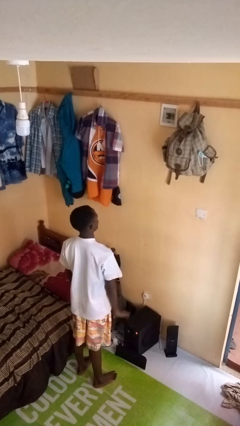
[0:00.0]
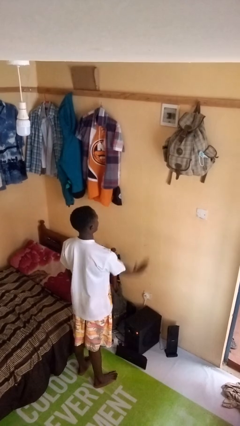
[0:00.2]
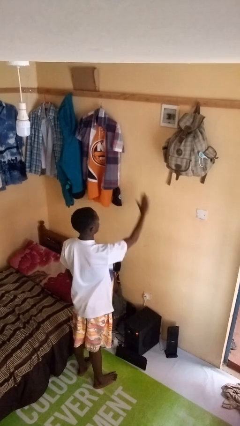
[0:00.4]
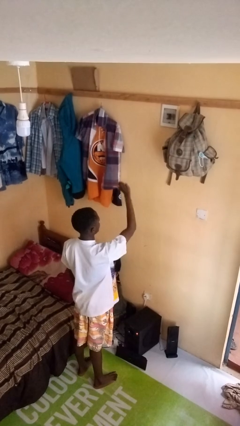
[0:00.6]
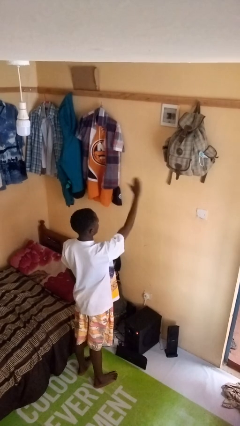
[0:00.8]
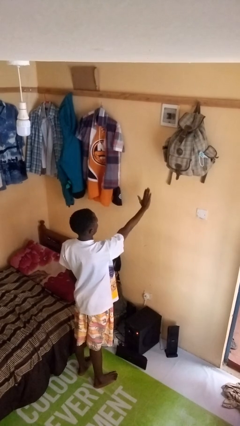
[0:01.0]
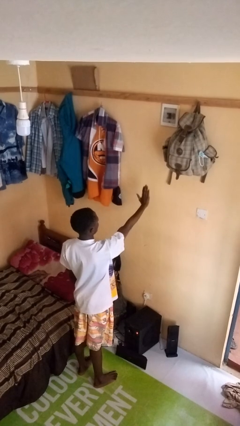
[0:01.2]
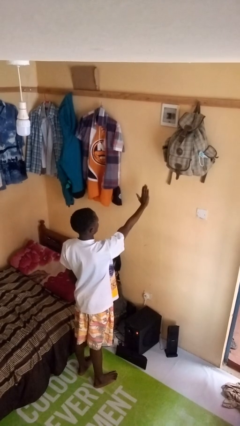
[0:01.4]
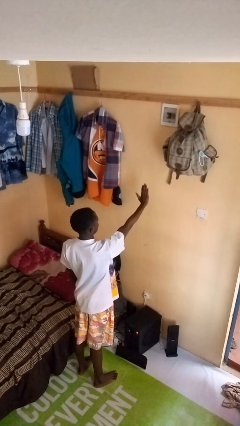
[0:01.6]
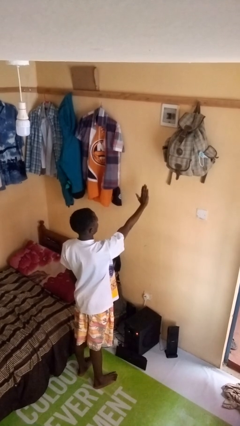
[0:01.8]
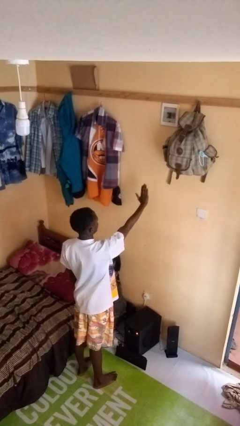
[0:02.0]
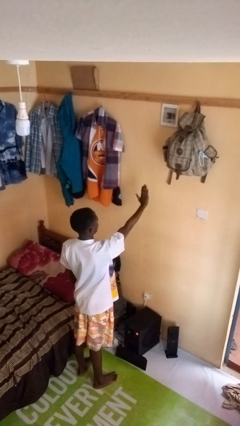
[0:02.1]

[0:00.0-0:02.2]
person gestures stop

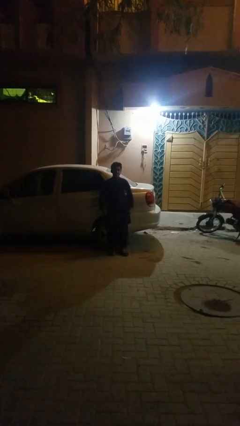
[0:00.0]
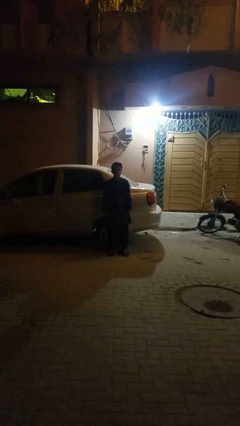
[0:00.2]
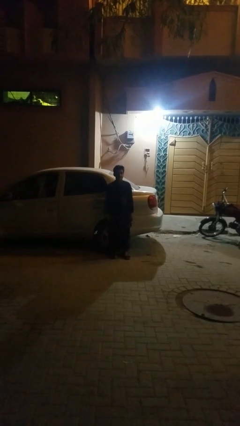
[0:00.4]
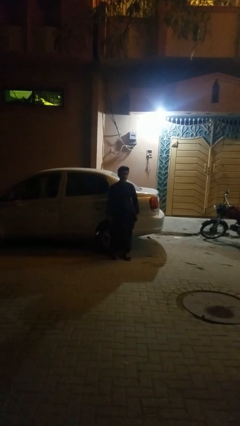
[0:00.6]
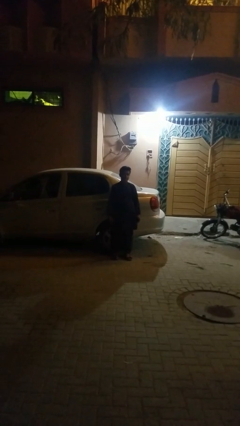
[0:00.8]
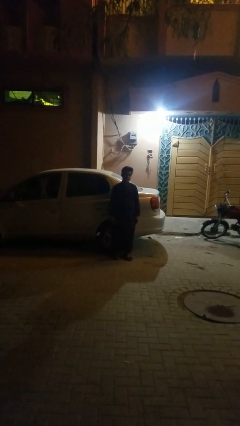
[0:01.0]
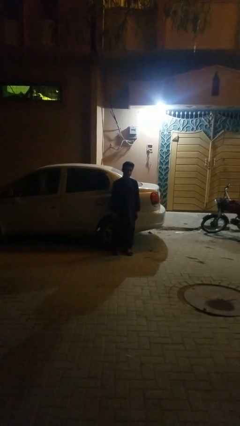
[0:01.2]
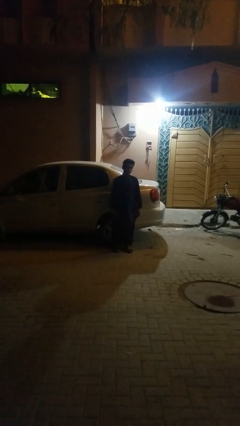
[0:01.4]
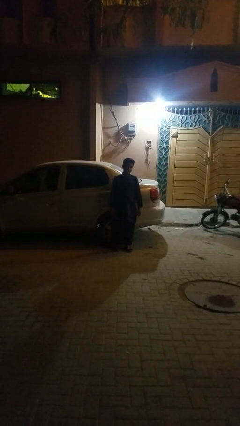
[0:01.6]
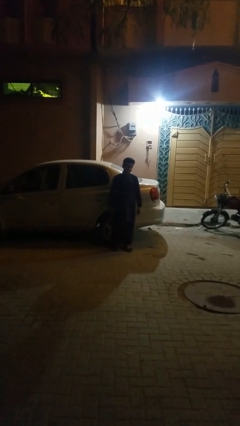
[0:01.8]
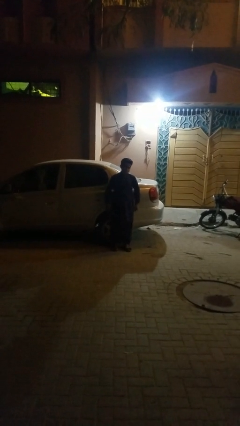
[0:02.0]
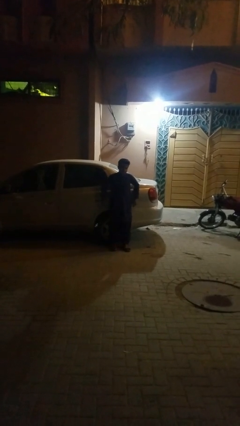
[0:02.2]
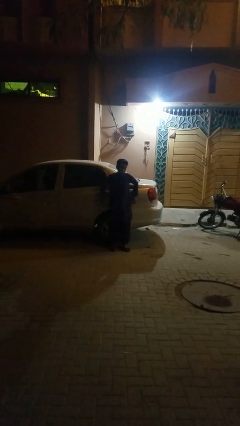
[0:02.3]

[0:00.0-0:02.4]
person leans against car

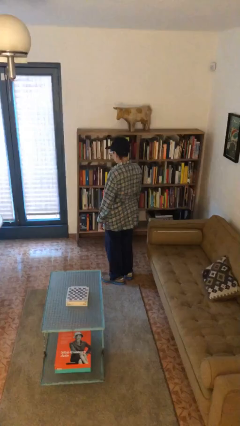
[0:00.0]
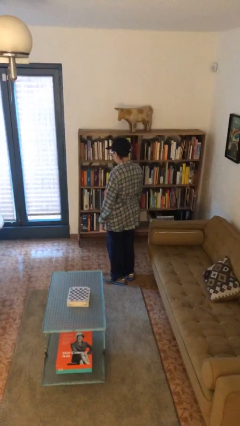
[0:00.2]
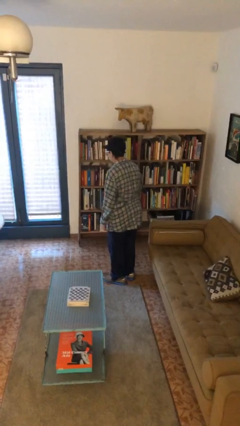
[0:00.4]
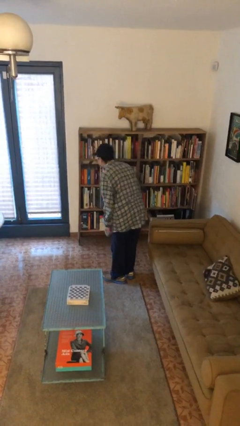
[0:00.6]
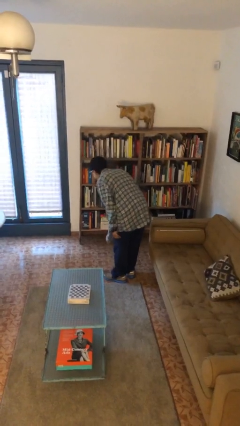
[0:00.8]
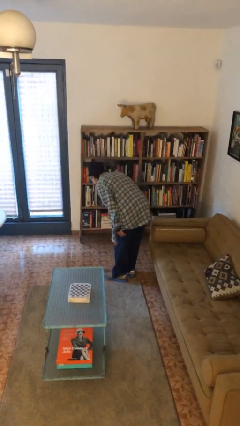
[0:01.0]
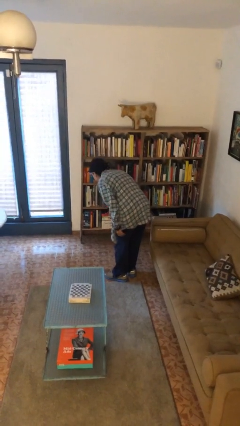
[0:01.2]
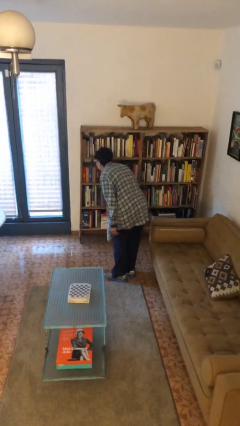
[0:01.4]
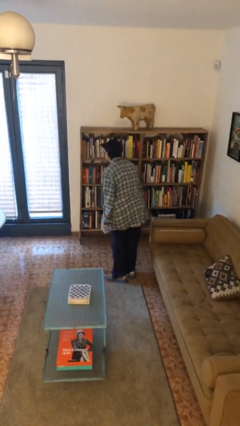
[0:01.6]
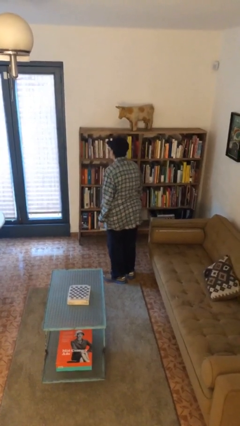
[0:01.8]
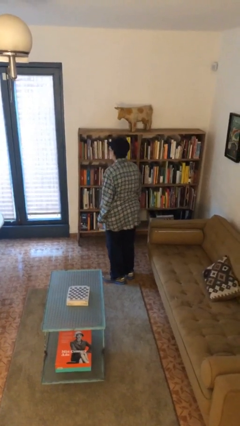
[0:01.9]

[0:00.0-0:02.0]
person bows

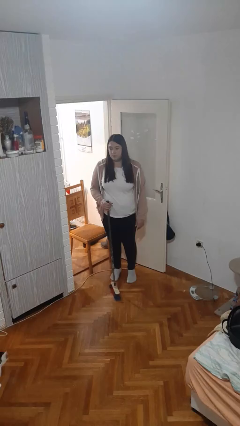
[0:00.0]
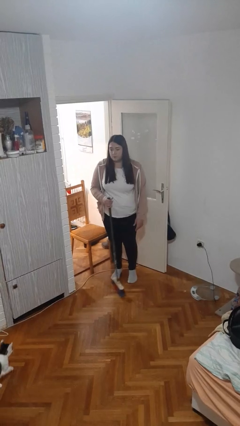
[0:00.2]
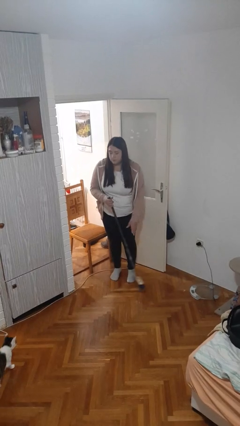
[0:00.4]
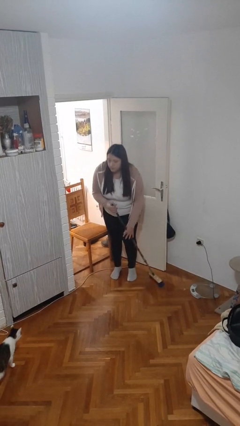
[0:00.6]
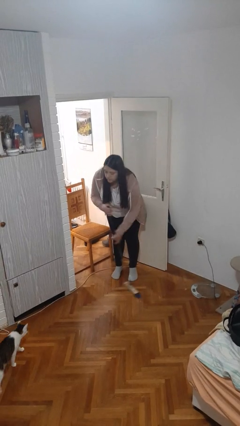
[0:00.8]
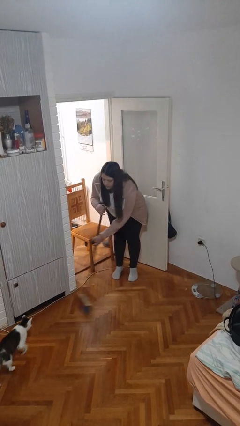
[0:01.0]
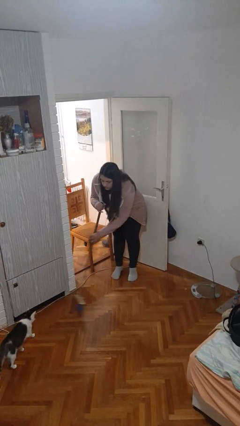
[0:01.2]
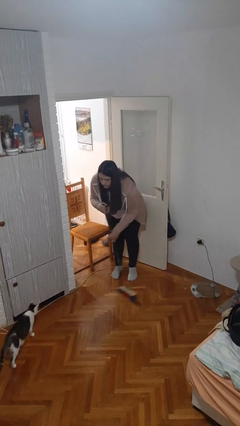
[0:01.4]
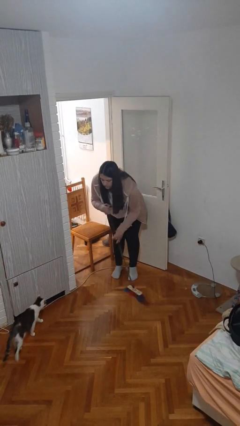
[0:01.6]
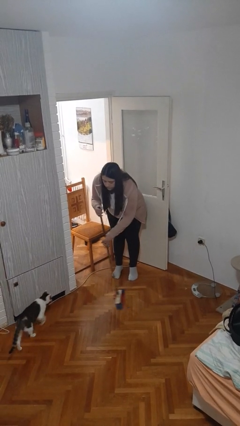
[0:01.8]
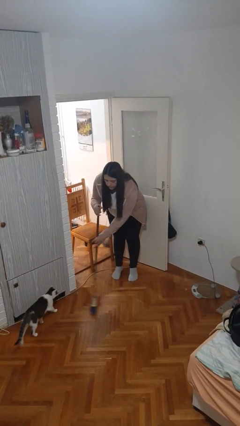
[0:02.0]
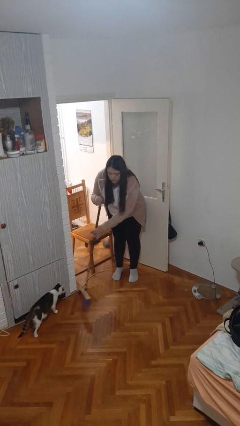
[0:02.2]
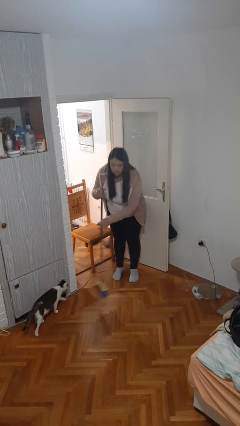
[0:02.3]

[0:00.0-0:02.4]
person sweeps floor

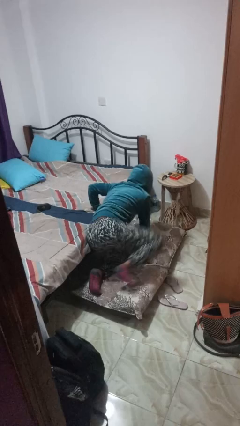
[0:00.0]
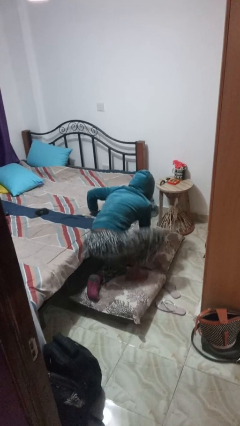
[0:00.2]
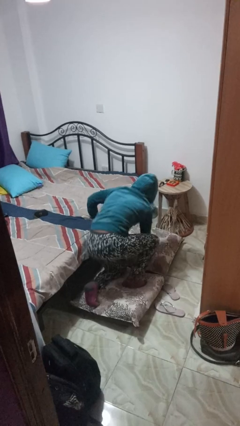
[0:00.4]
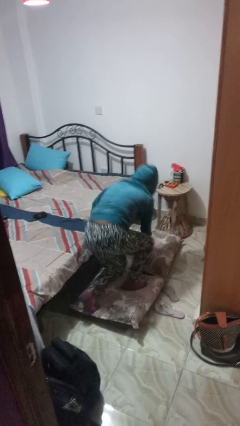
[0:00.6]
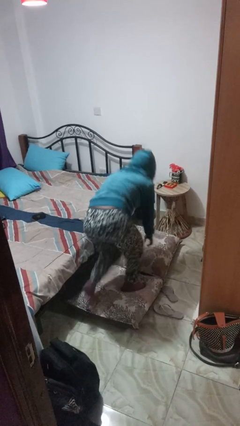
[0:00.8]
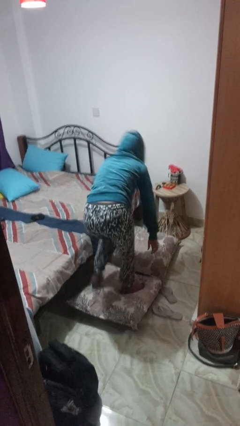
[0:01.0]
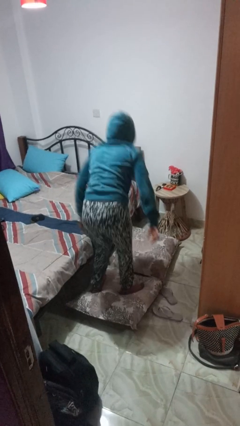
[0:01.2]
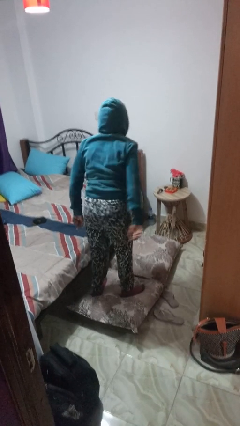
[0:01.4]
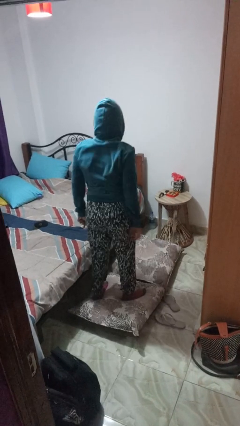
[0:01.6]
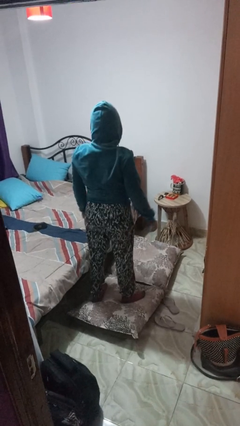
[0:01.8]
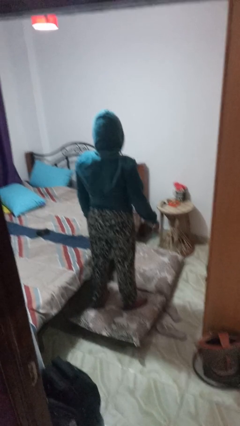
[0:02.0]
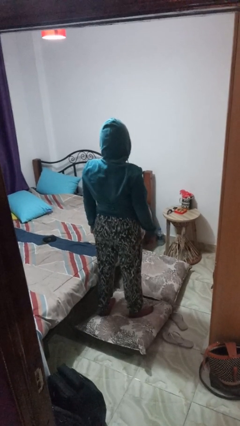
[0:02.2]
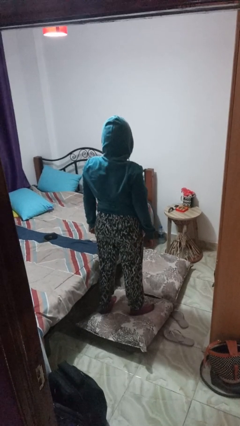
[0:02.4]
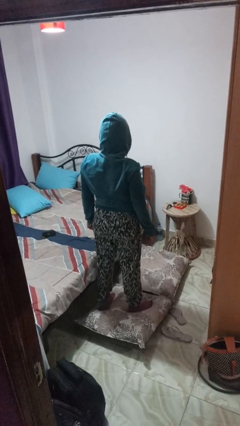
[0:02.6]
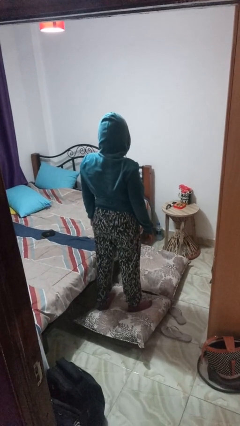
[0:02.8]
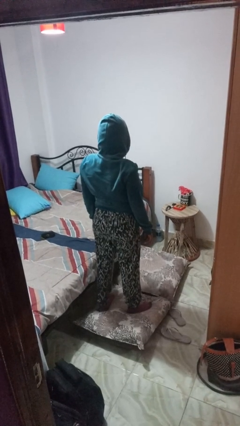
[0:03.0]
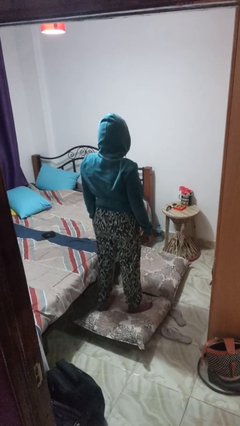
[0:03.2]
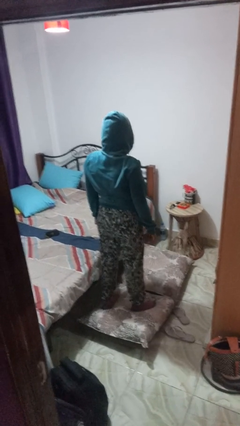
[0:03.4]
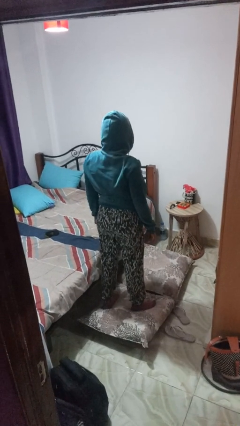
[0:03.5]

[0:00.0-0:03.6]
person stands up from floor

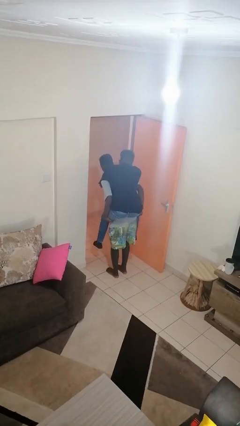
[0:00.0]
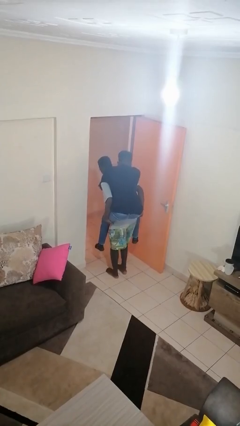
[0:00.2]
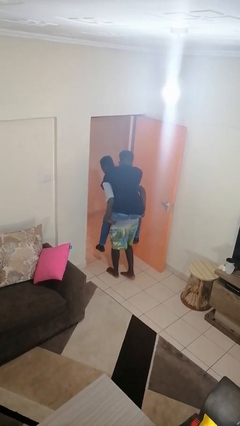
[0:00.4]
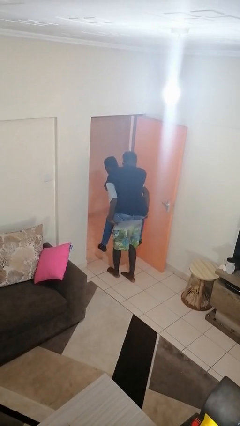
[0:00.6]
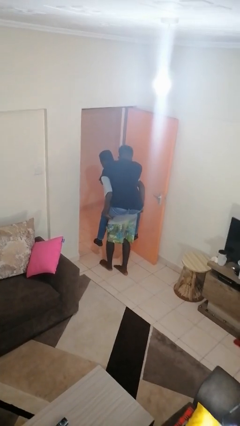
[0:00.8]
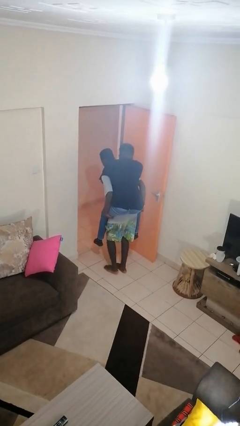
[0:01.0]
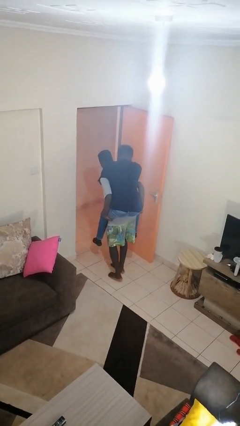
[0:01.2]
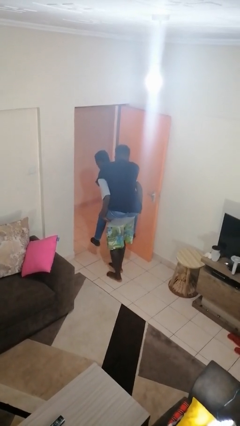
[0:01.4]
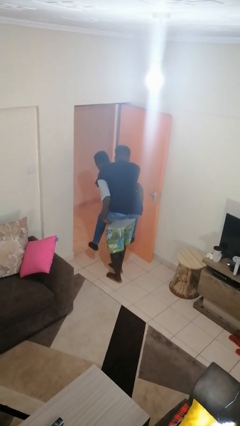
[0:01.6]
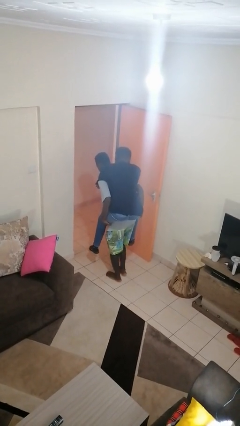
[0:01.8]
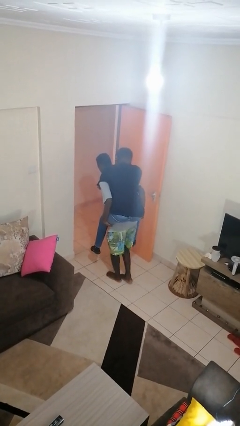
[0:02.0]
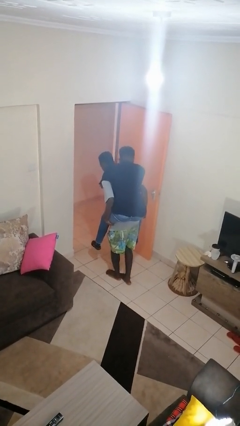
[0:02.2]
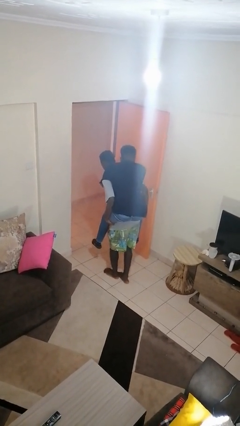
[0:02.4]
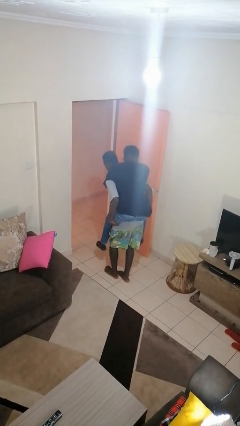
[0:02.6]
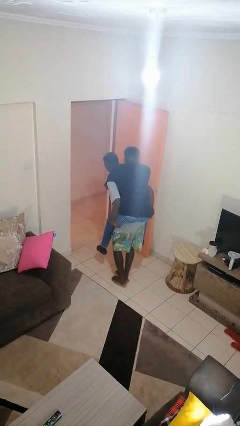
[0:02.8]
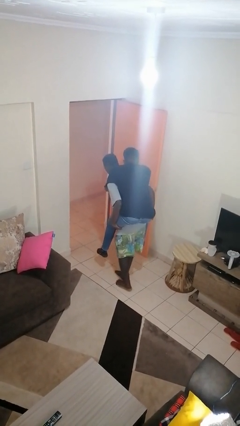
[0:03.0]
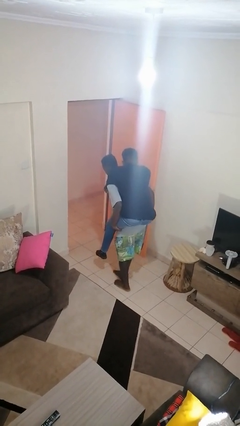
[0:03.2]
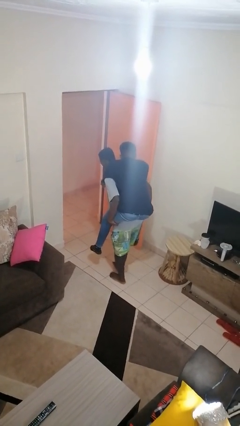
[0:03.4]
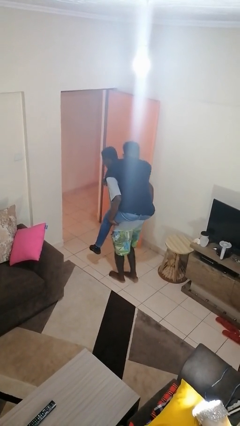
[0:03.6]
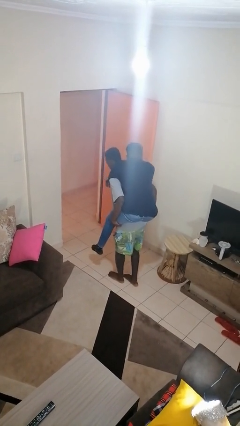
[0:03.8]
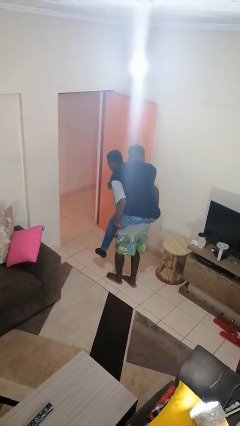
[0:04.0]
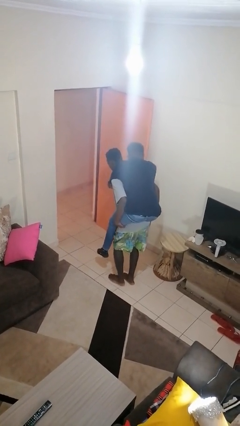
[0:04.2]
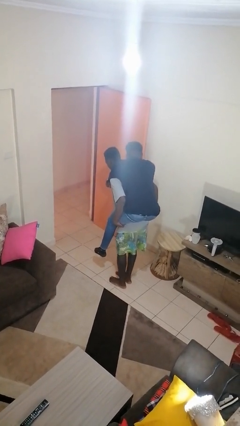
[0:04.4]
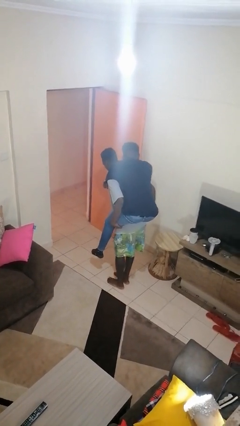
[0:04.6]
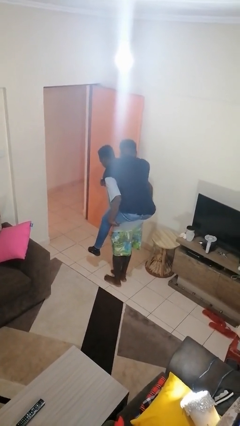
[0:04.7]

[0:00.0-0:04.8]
person carries person on back
